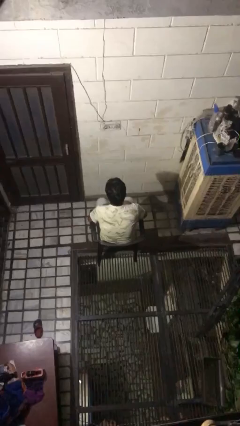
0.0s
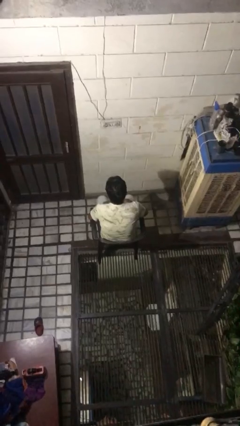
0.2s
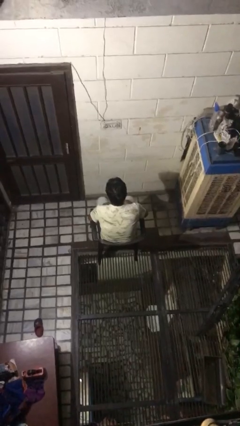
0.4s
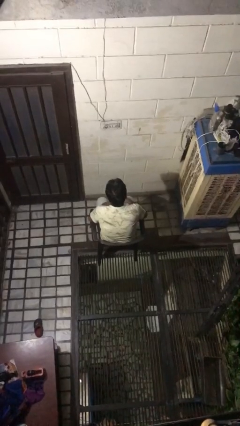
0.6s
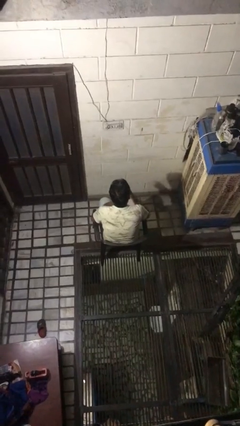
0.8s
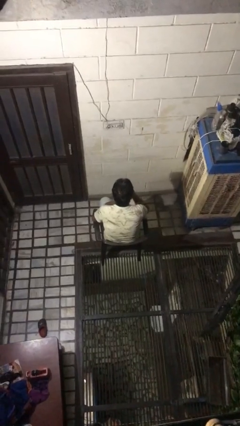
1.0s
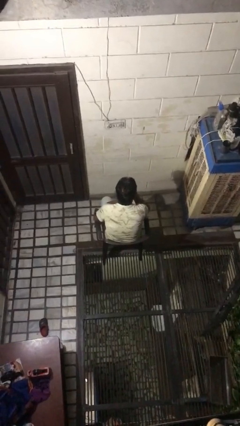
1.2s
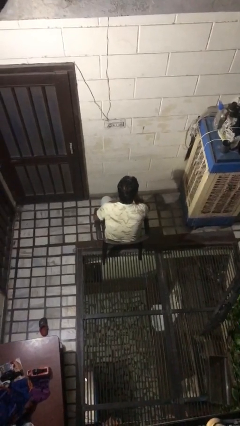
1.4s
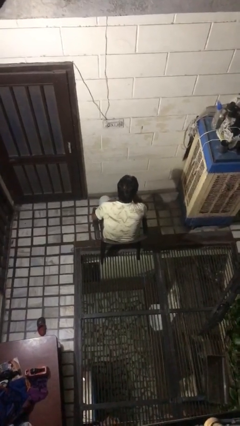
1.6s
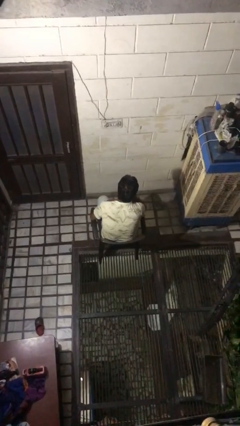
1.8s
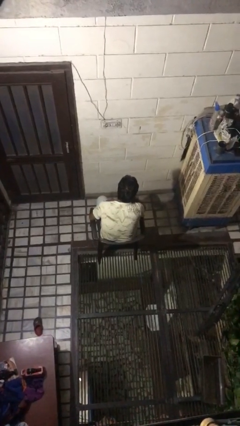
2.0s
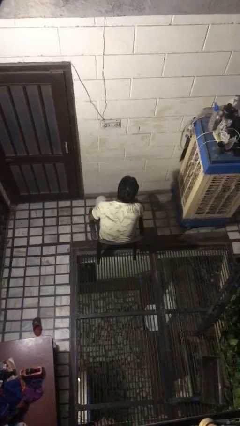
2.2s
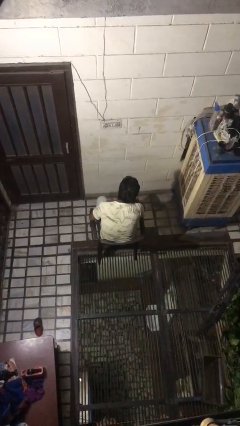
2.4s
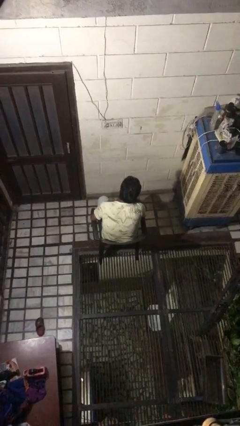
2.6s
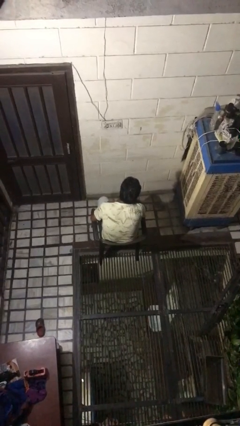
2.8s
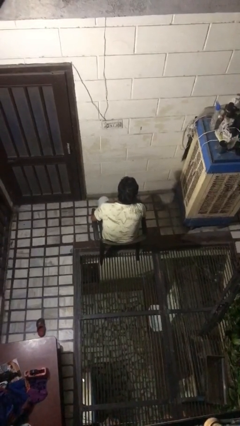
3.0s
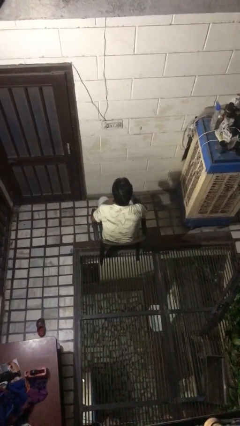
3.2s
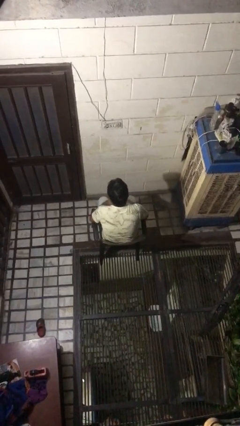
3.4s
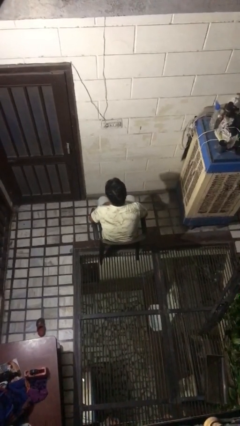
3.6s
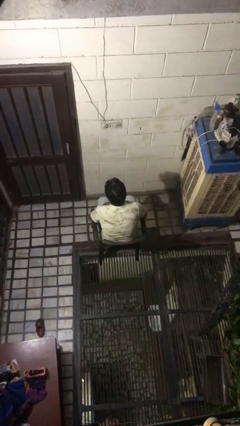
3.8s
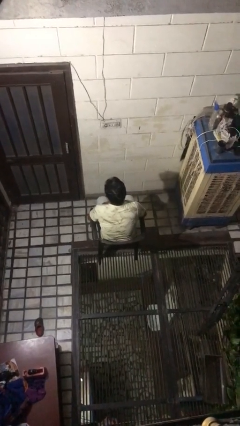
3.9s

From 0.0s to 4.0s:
person strokes chin

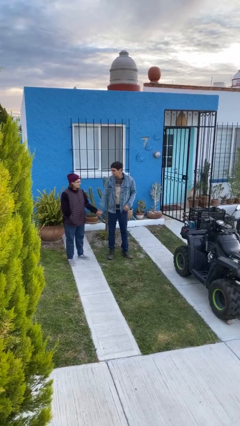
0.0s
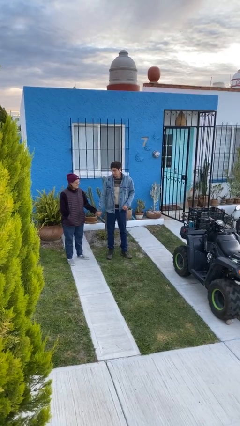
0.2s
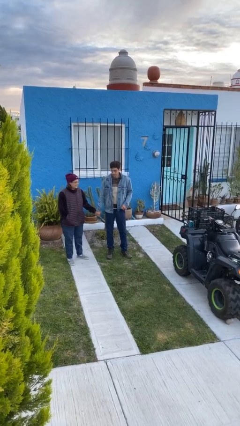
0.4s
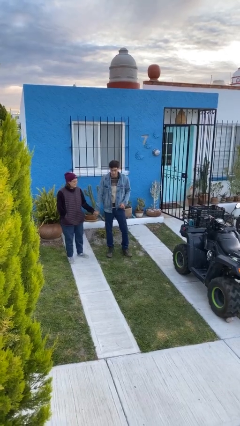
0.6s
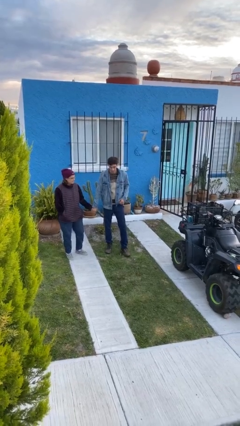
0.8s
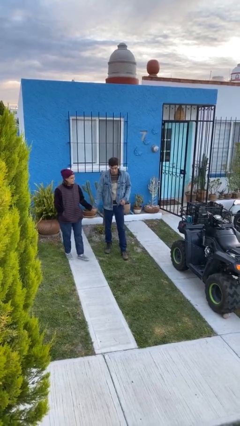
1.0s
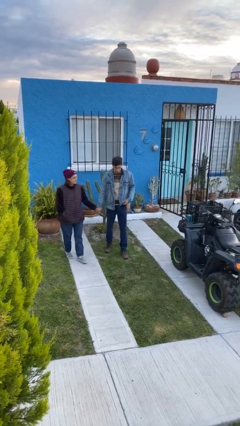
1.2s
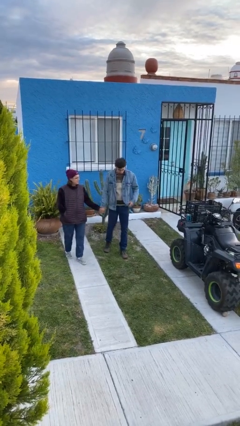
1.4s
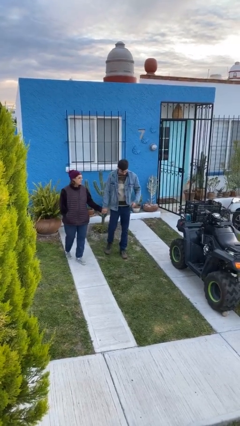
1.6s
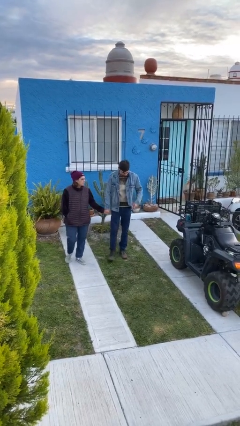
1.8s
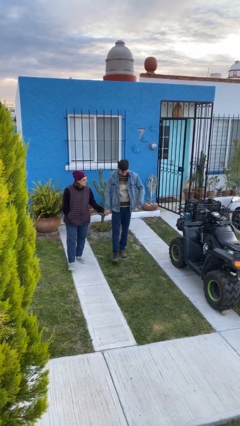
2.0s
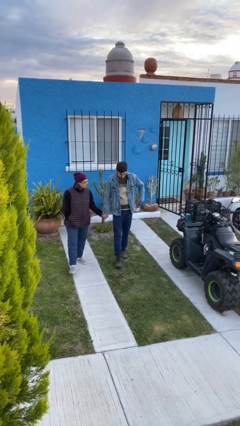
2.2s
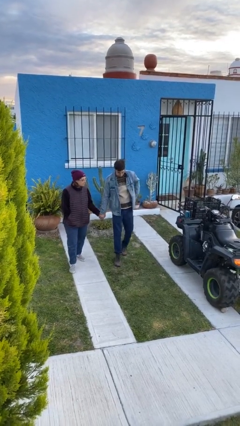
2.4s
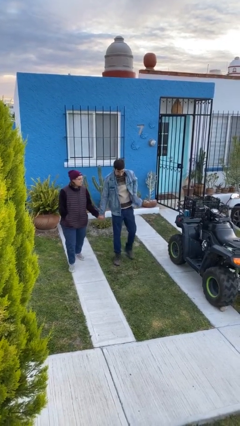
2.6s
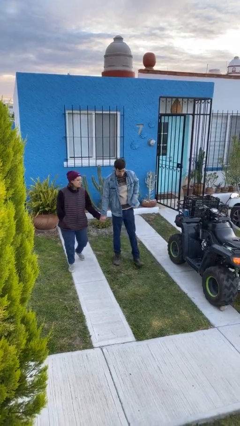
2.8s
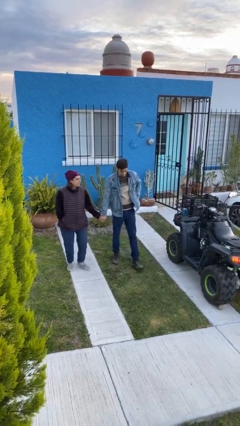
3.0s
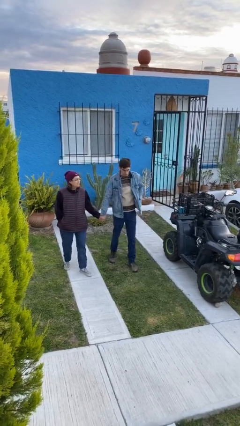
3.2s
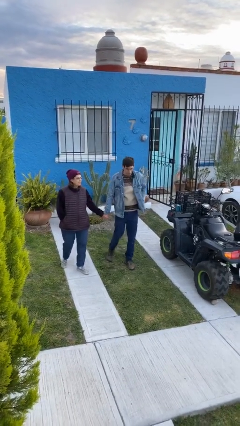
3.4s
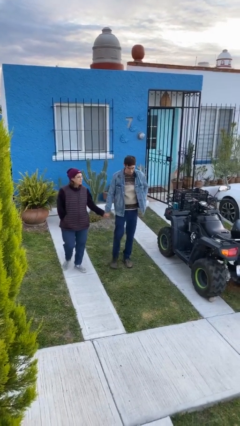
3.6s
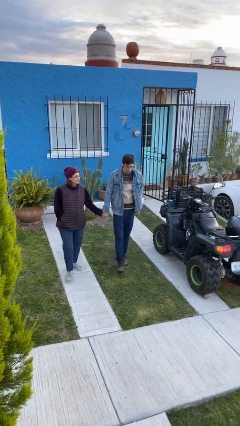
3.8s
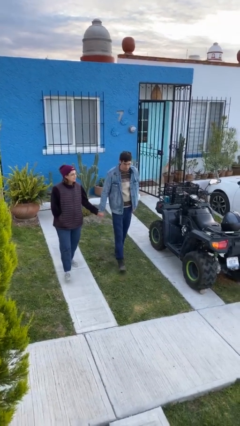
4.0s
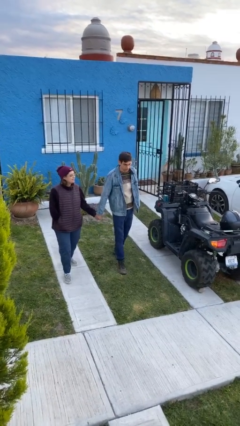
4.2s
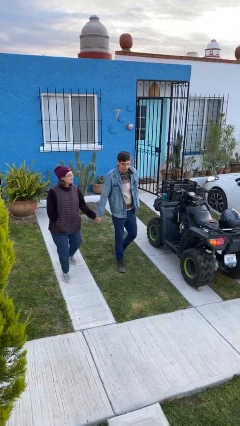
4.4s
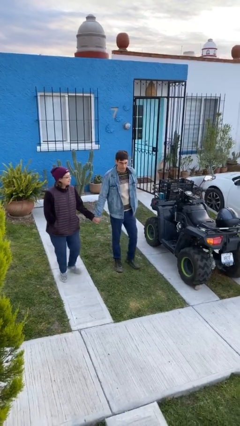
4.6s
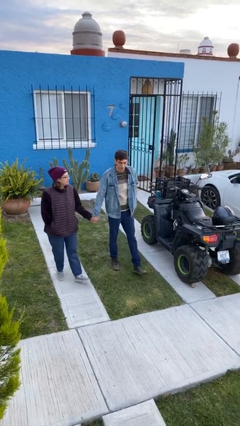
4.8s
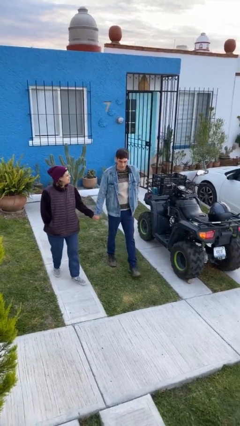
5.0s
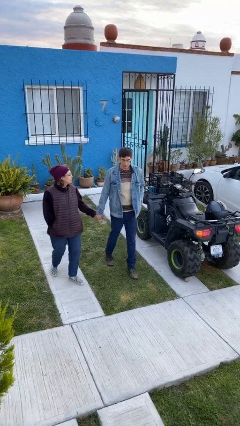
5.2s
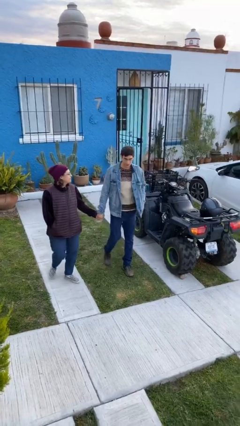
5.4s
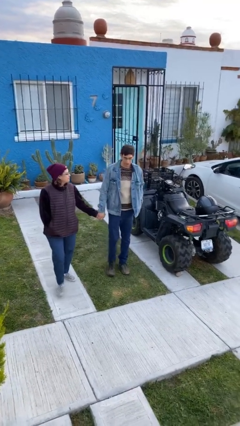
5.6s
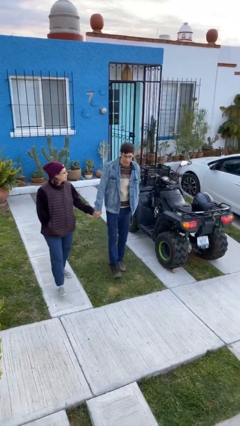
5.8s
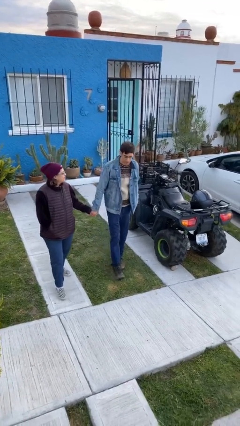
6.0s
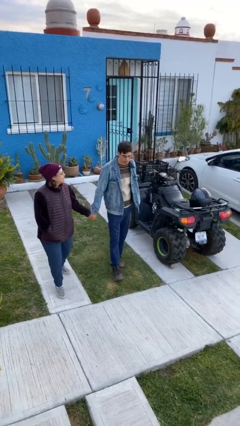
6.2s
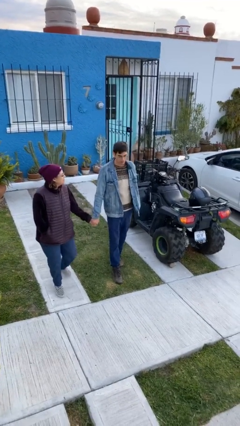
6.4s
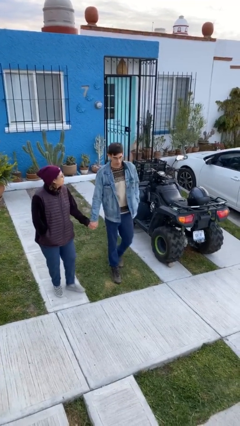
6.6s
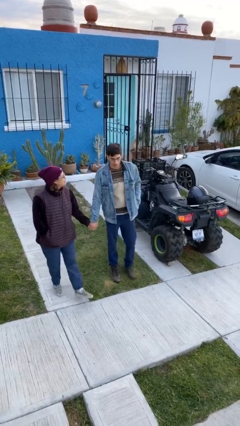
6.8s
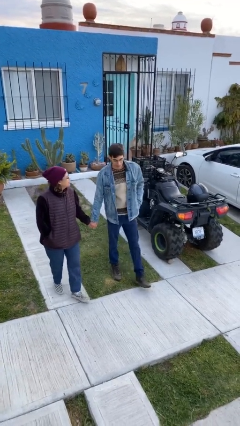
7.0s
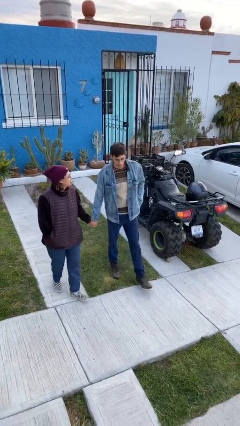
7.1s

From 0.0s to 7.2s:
person holds hand

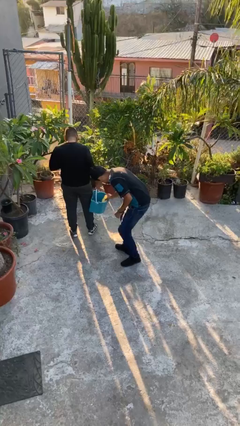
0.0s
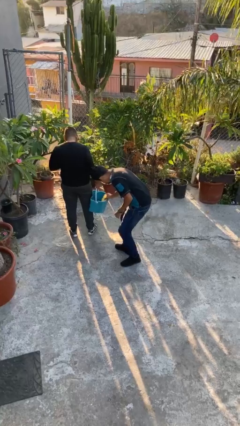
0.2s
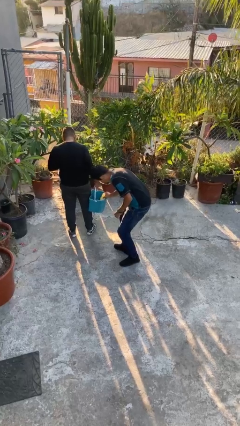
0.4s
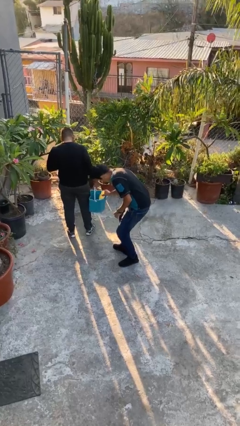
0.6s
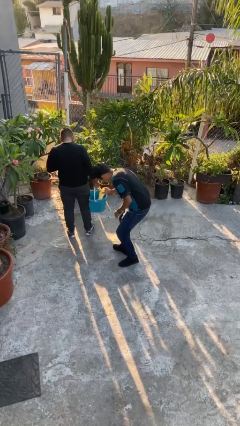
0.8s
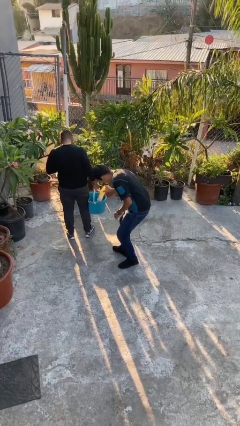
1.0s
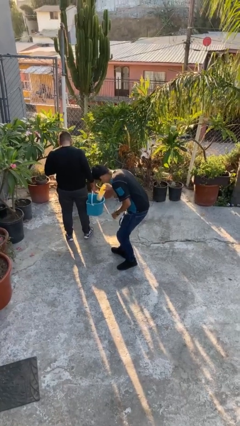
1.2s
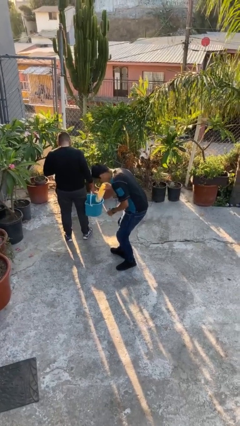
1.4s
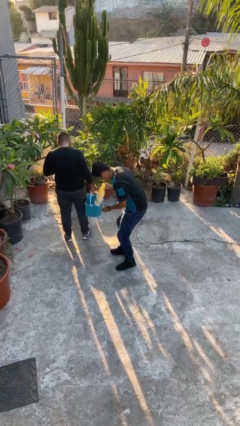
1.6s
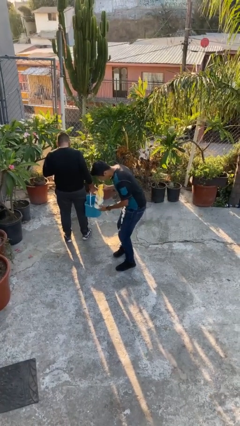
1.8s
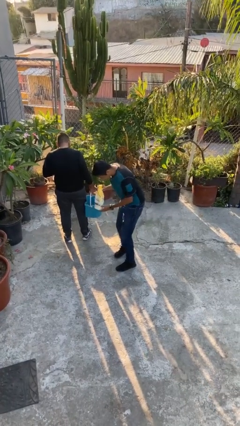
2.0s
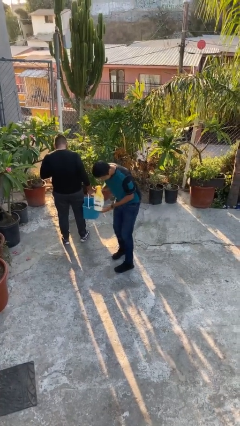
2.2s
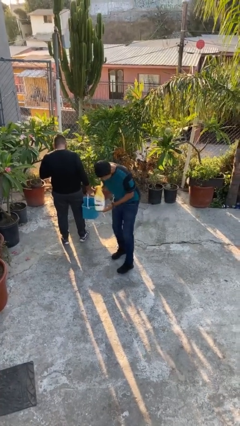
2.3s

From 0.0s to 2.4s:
person steals object from person

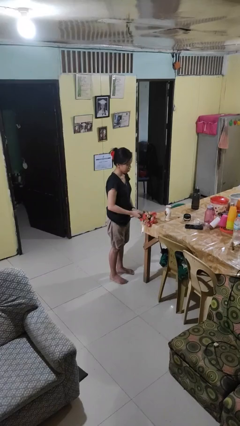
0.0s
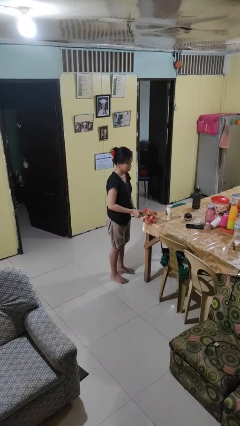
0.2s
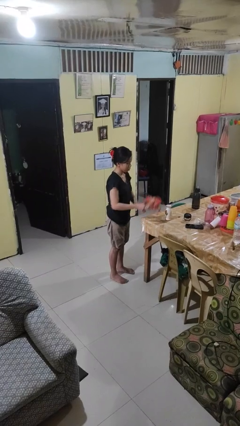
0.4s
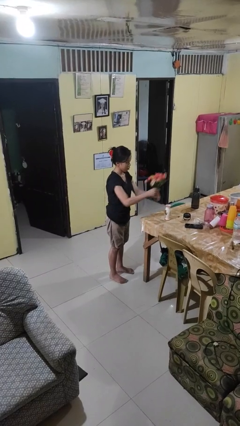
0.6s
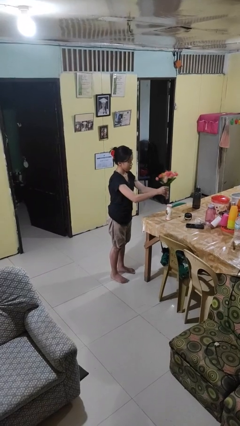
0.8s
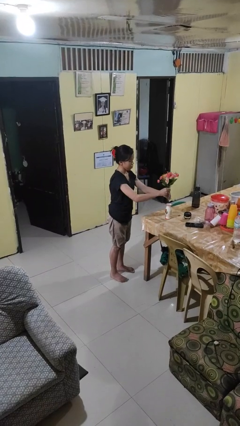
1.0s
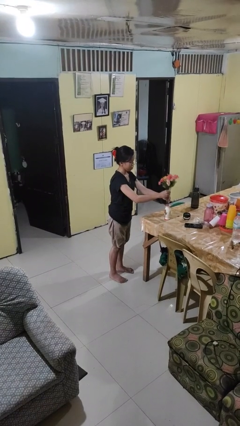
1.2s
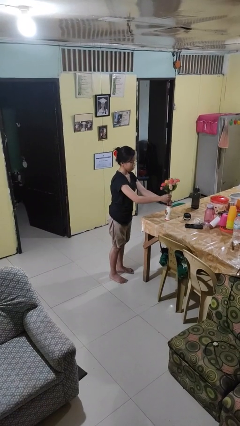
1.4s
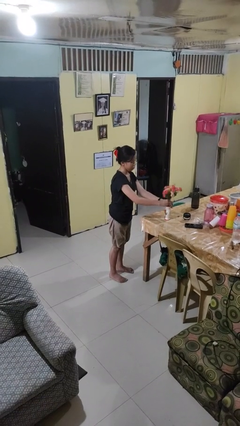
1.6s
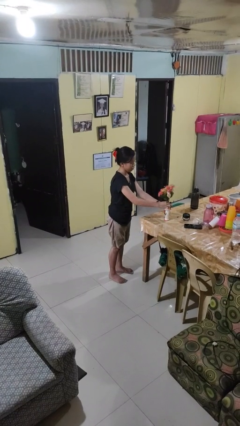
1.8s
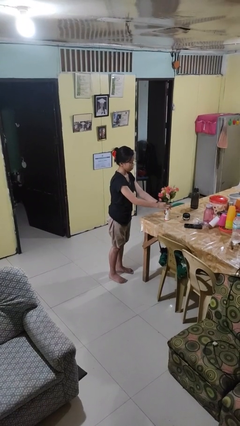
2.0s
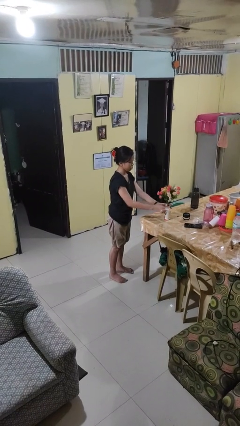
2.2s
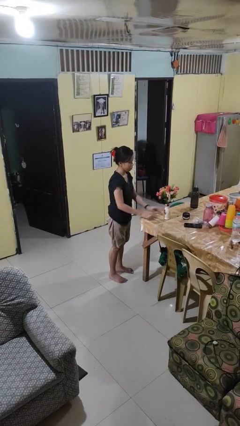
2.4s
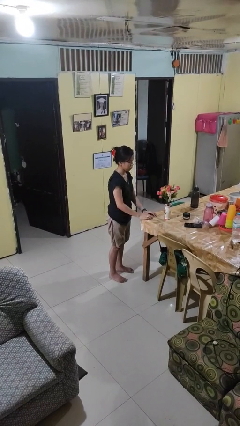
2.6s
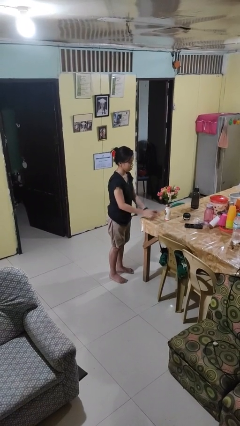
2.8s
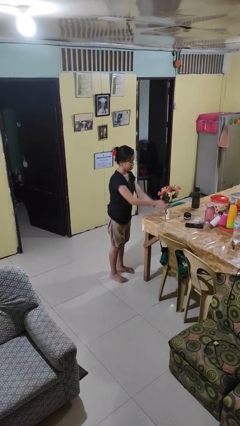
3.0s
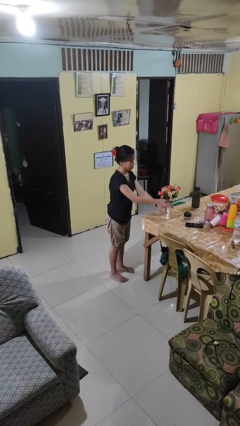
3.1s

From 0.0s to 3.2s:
person arranges flowers in vase

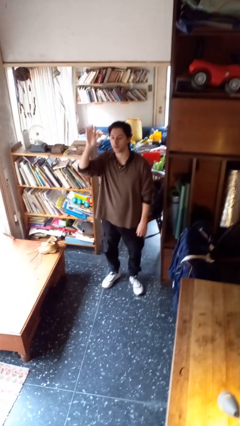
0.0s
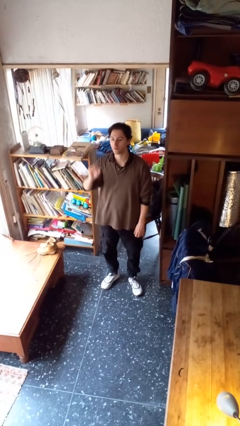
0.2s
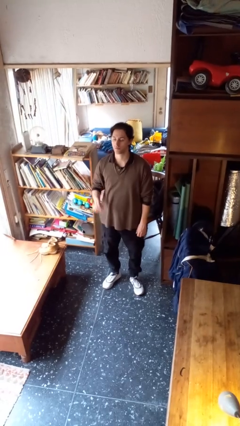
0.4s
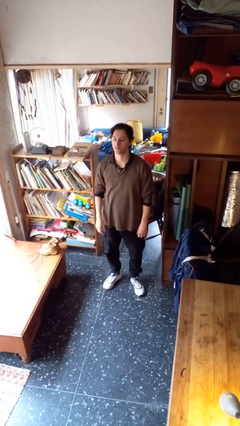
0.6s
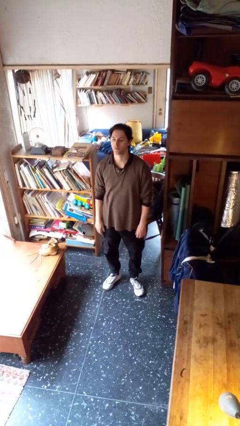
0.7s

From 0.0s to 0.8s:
person gestures lower hand

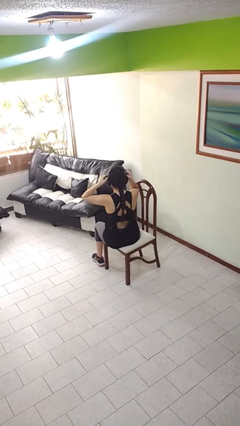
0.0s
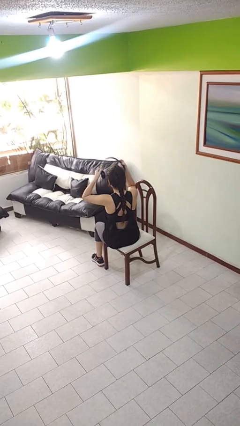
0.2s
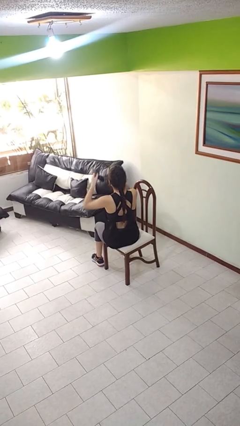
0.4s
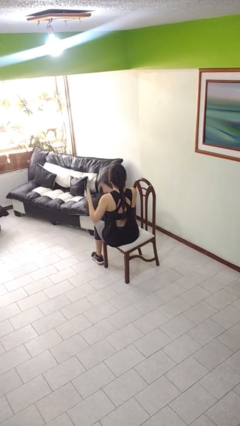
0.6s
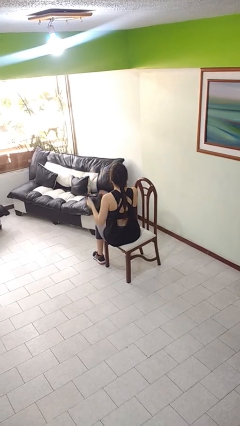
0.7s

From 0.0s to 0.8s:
person takes off headphones
